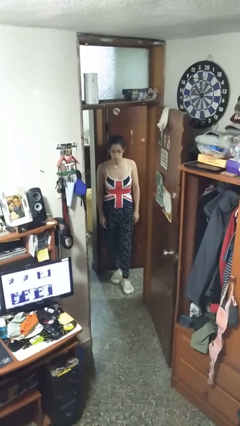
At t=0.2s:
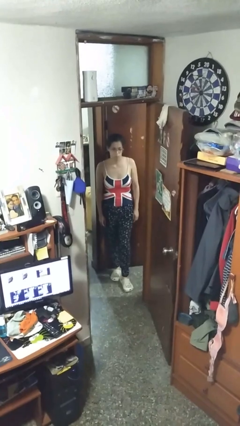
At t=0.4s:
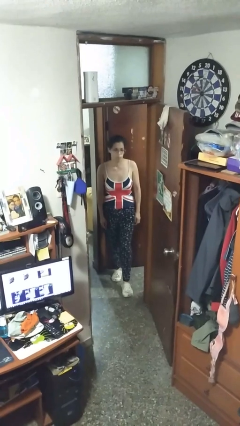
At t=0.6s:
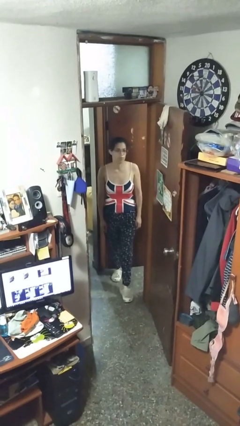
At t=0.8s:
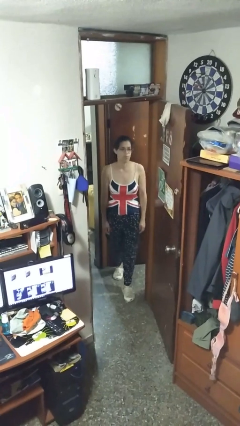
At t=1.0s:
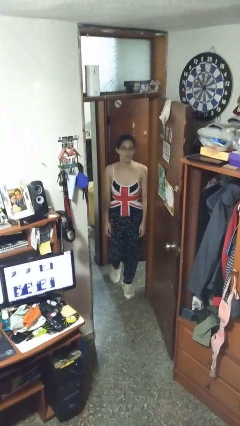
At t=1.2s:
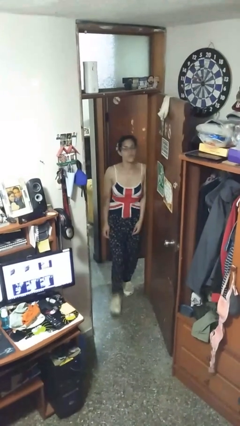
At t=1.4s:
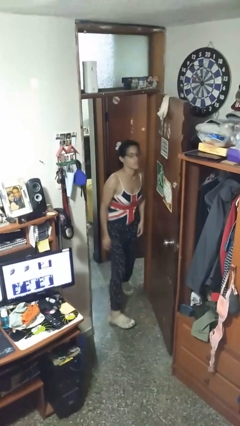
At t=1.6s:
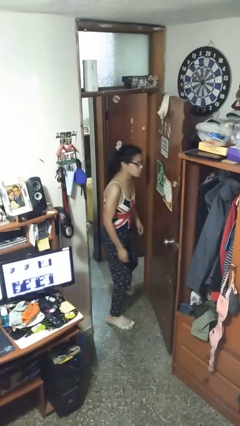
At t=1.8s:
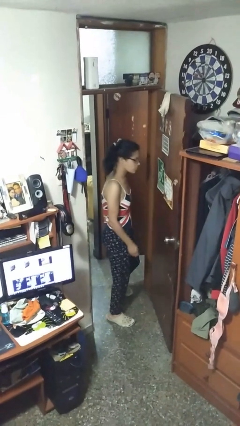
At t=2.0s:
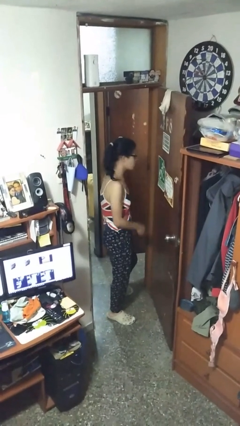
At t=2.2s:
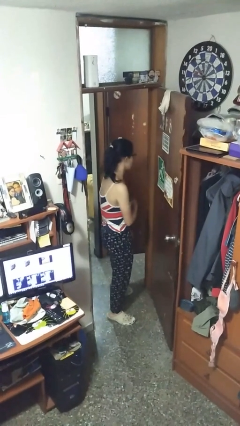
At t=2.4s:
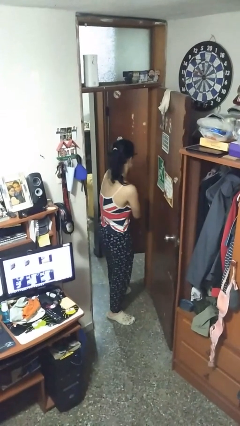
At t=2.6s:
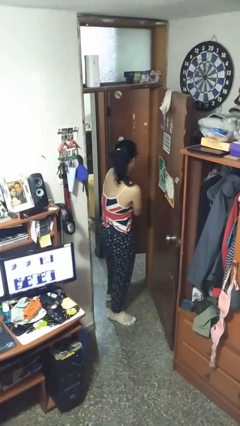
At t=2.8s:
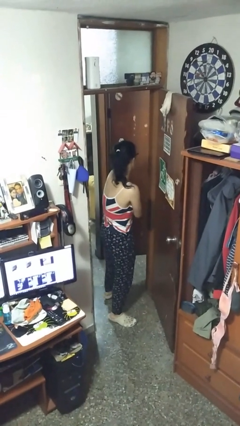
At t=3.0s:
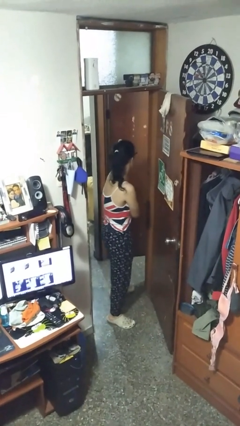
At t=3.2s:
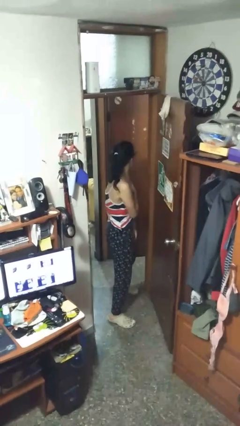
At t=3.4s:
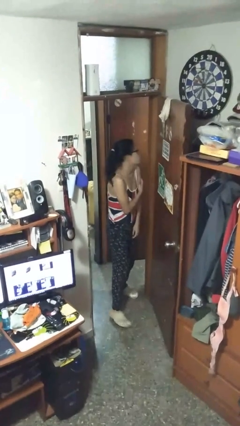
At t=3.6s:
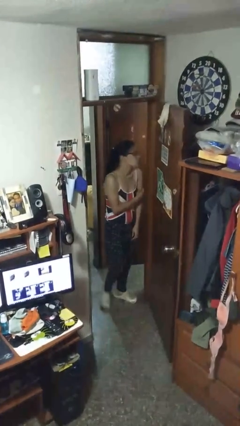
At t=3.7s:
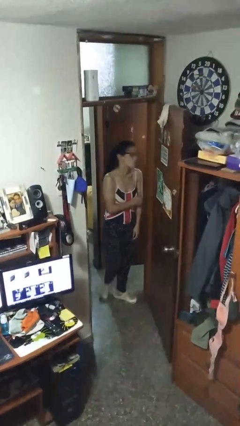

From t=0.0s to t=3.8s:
person bumps into wall

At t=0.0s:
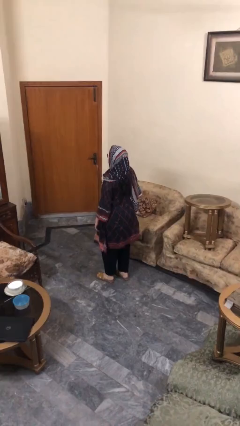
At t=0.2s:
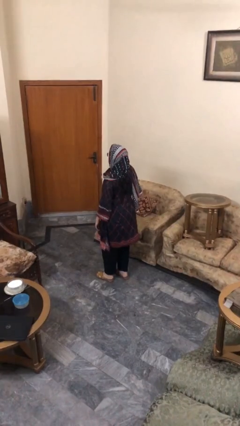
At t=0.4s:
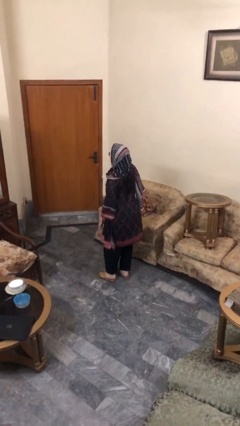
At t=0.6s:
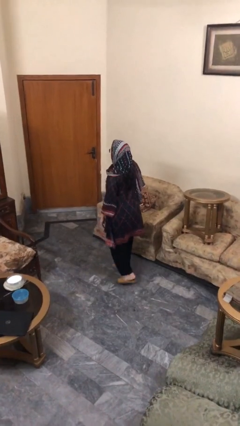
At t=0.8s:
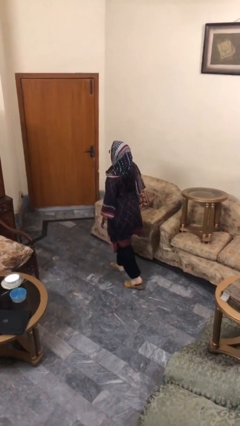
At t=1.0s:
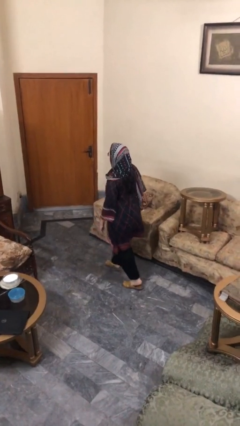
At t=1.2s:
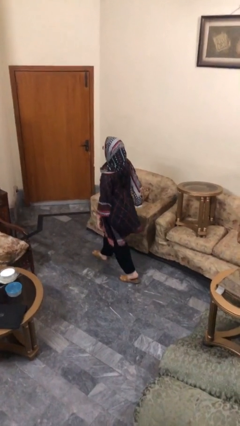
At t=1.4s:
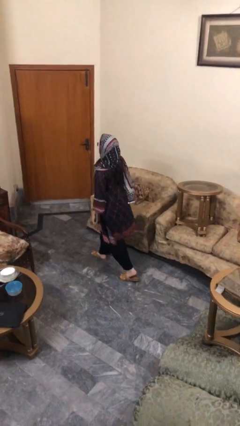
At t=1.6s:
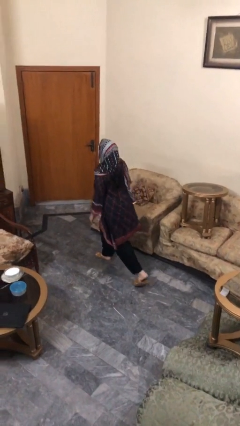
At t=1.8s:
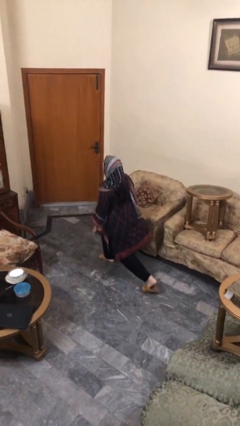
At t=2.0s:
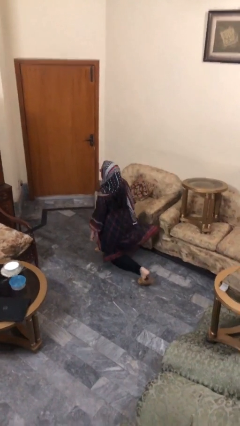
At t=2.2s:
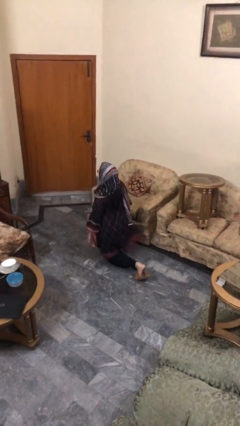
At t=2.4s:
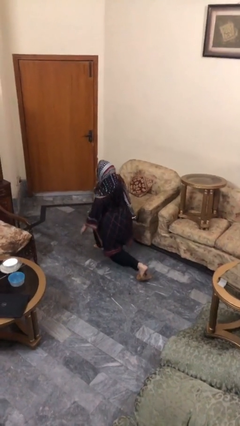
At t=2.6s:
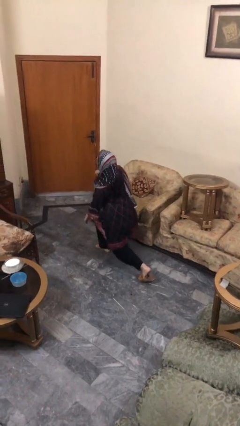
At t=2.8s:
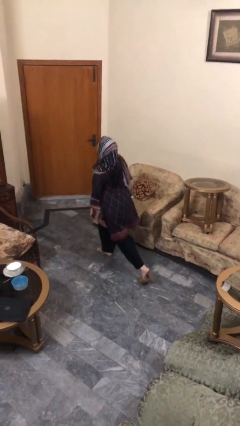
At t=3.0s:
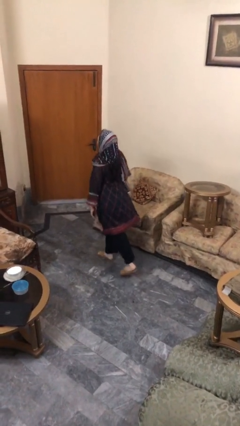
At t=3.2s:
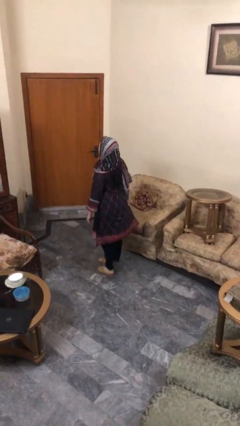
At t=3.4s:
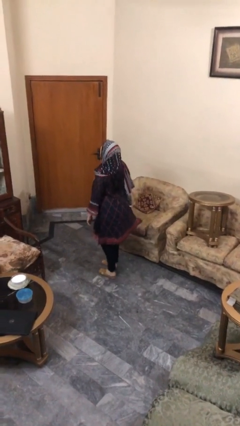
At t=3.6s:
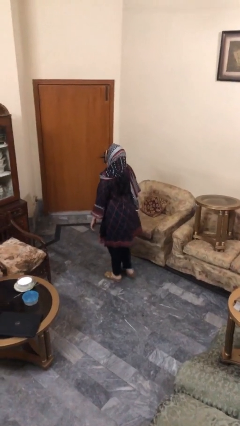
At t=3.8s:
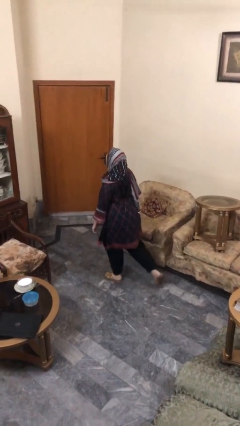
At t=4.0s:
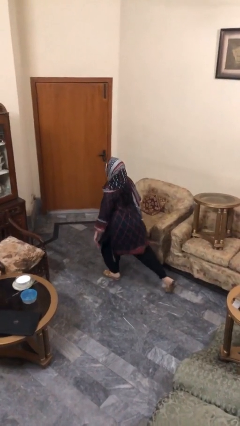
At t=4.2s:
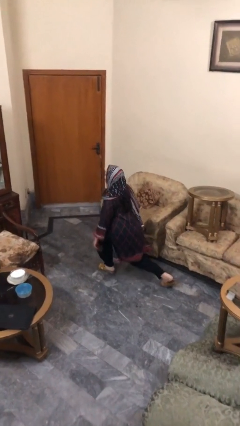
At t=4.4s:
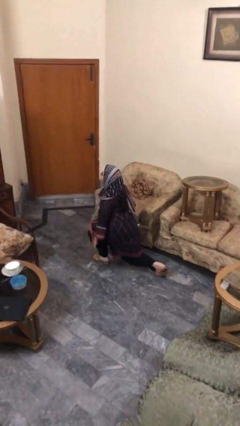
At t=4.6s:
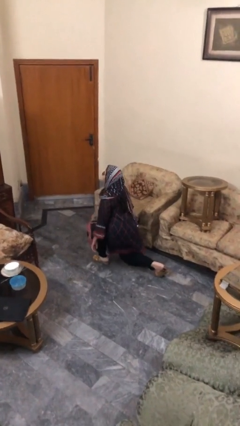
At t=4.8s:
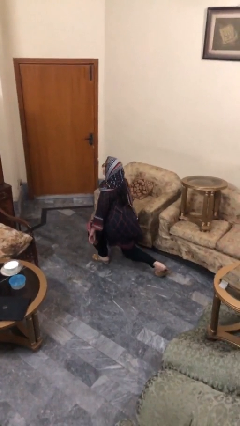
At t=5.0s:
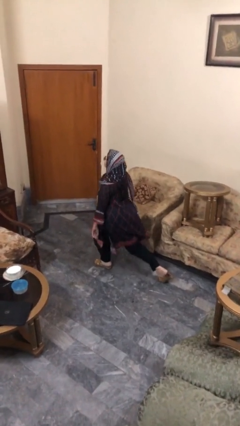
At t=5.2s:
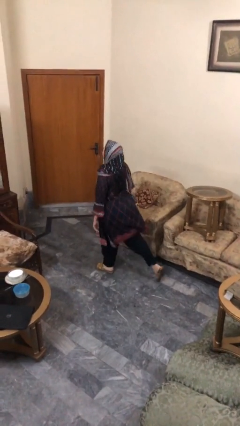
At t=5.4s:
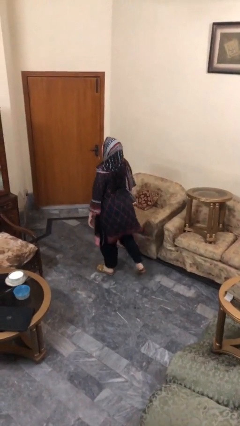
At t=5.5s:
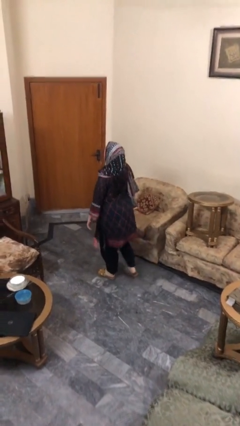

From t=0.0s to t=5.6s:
person exercises with lunges

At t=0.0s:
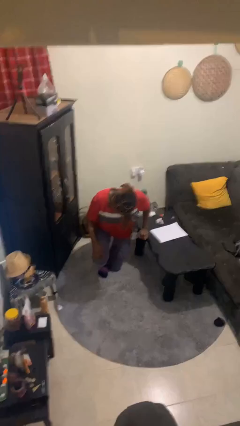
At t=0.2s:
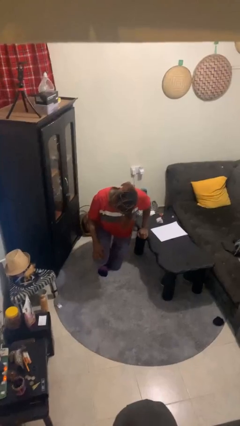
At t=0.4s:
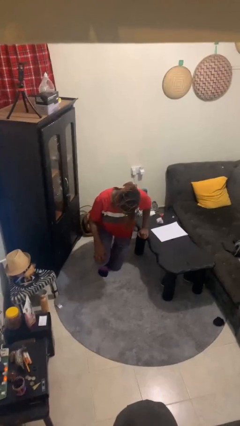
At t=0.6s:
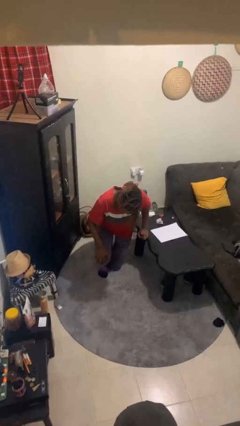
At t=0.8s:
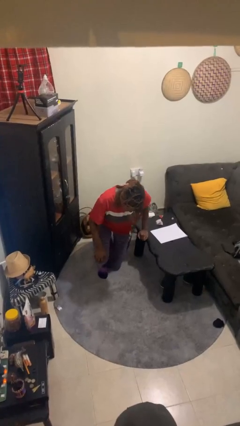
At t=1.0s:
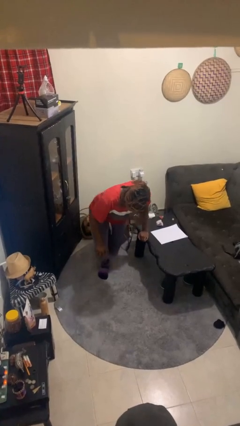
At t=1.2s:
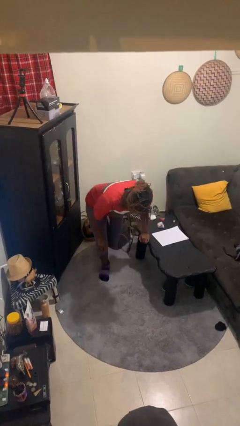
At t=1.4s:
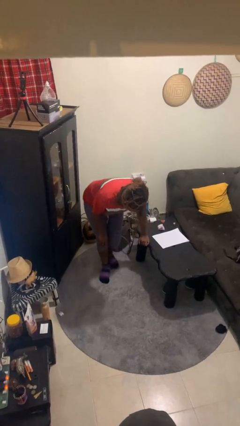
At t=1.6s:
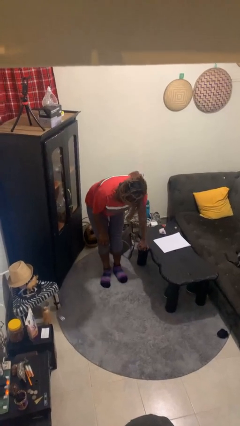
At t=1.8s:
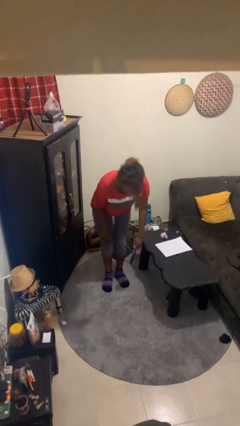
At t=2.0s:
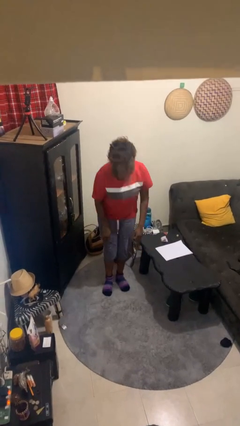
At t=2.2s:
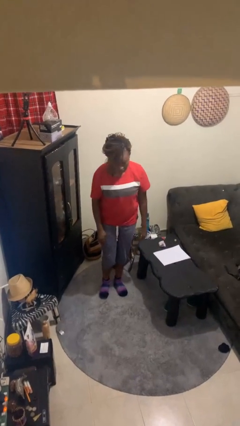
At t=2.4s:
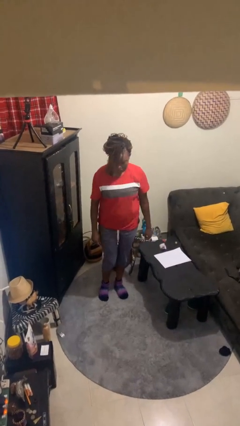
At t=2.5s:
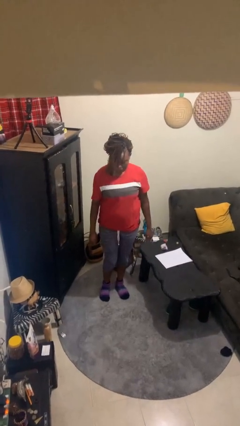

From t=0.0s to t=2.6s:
person stands up from floor

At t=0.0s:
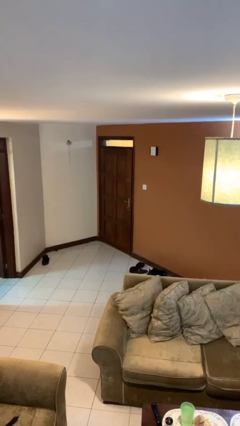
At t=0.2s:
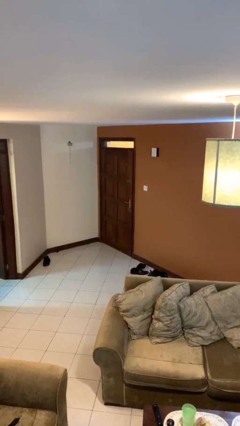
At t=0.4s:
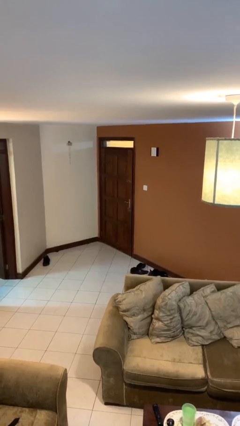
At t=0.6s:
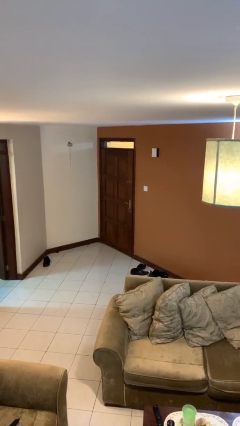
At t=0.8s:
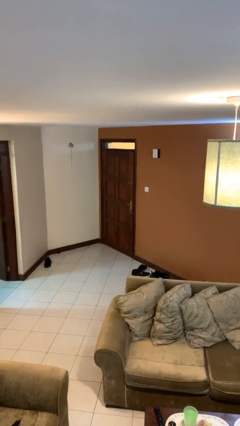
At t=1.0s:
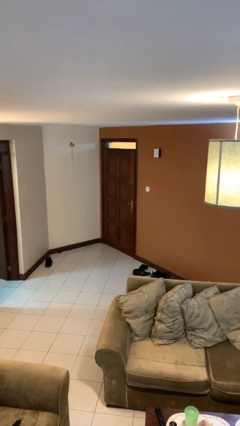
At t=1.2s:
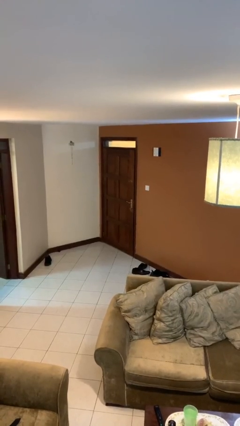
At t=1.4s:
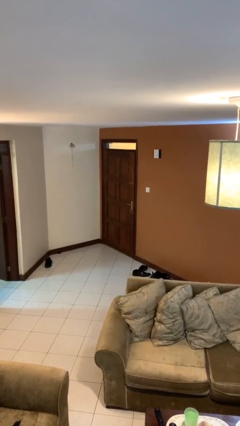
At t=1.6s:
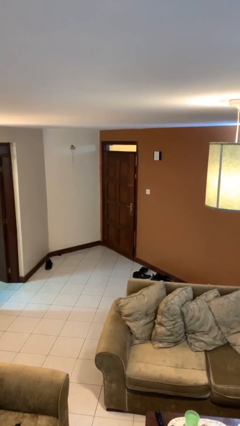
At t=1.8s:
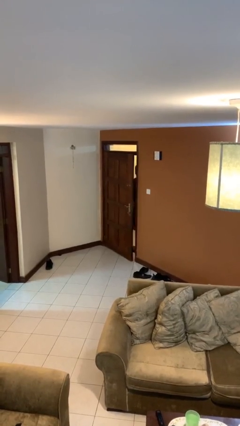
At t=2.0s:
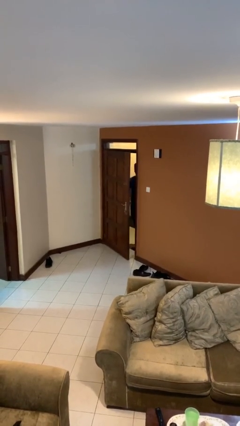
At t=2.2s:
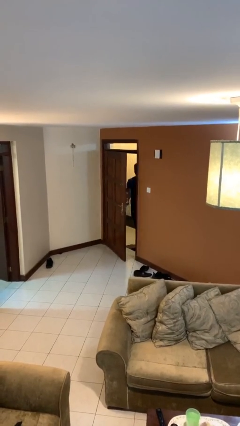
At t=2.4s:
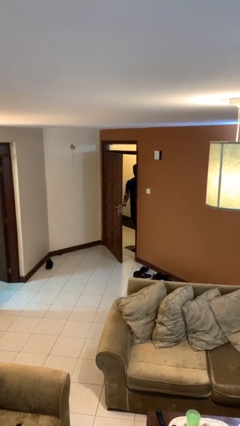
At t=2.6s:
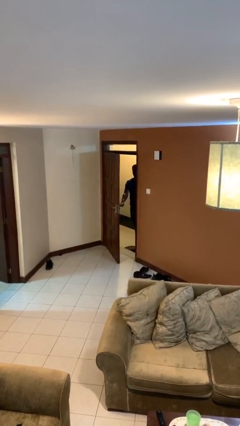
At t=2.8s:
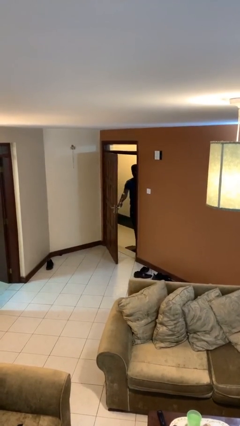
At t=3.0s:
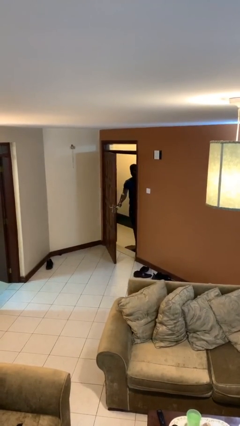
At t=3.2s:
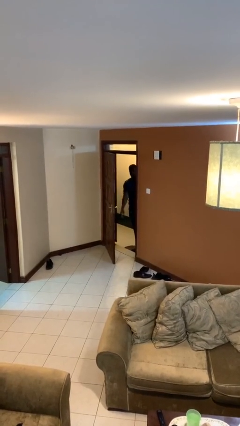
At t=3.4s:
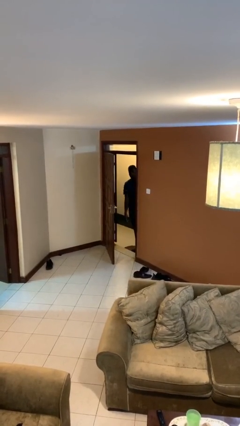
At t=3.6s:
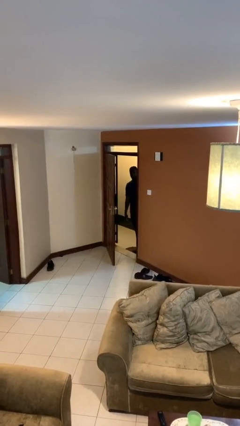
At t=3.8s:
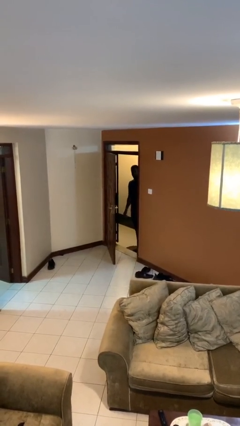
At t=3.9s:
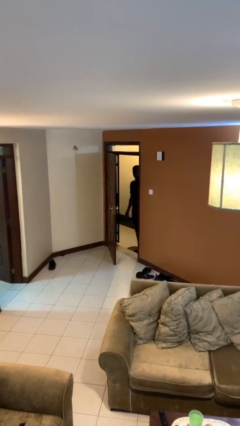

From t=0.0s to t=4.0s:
person opens facility door

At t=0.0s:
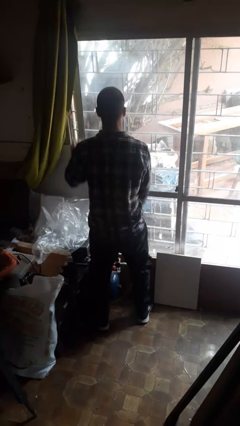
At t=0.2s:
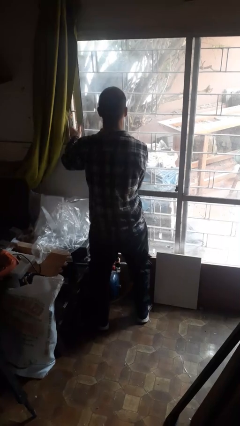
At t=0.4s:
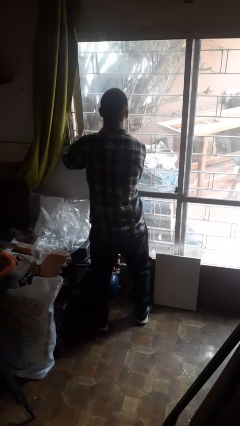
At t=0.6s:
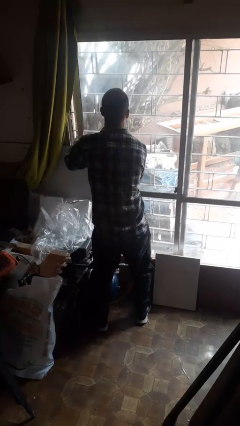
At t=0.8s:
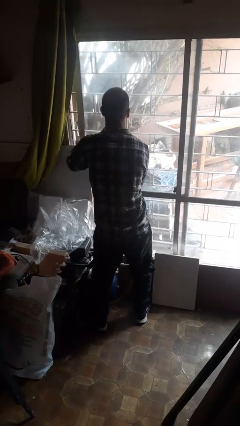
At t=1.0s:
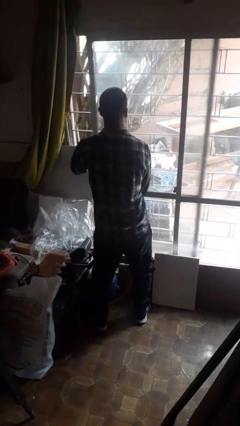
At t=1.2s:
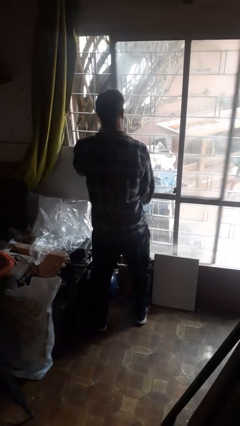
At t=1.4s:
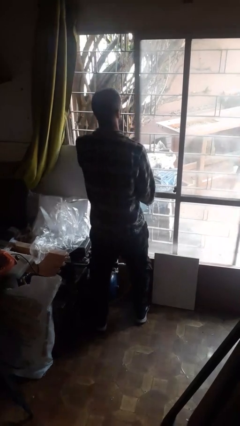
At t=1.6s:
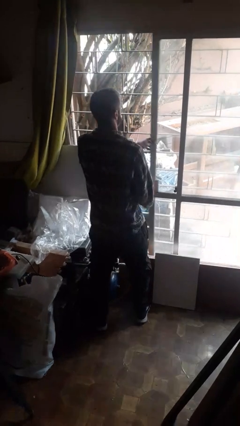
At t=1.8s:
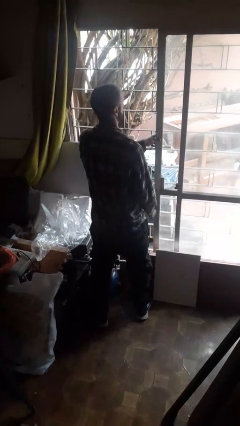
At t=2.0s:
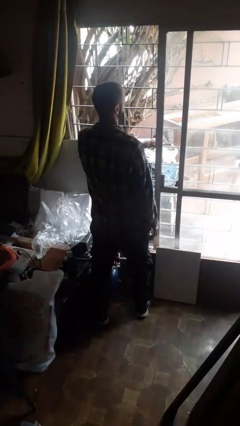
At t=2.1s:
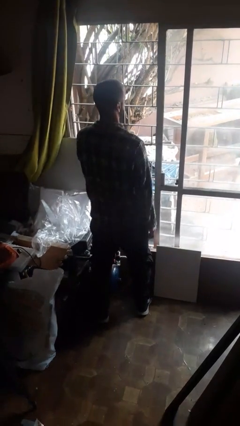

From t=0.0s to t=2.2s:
person opens sliding door
